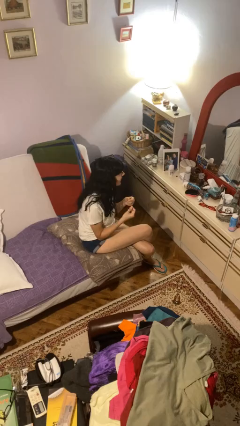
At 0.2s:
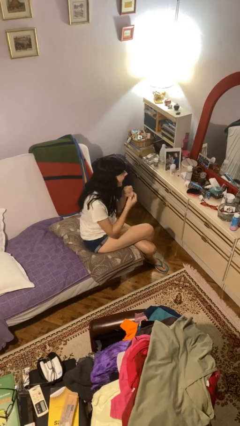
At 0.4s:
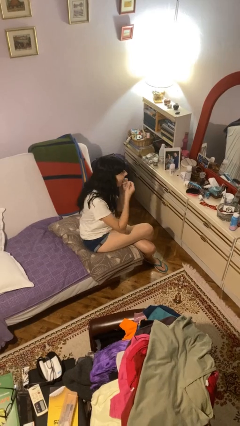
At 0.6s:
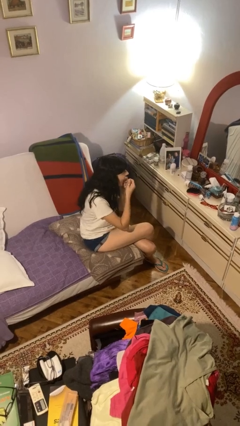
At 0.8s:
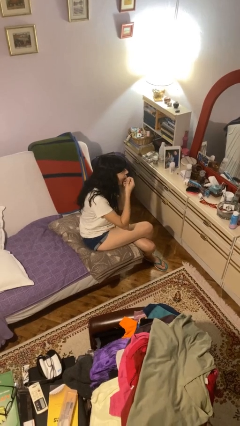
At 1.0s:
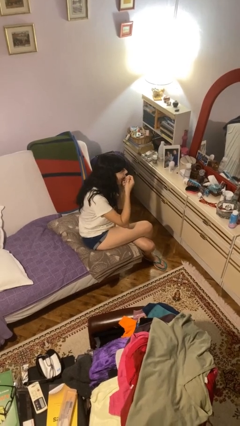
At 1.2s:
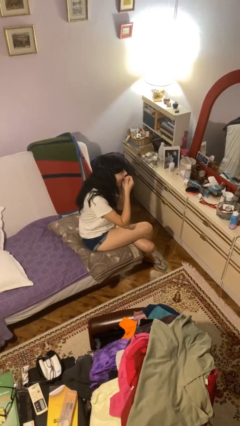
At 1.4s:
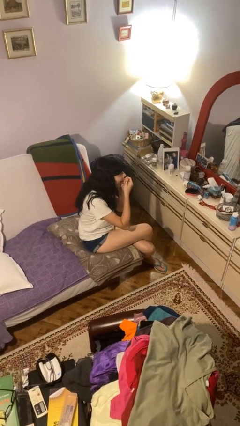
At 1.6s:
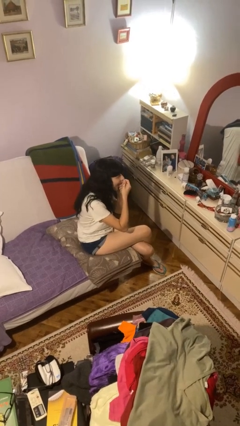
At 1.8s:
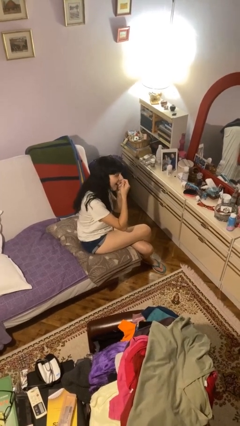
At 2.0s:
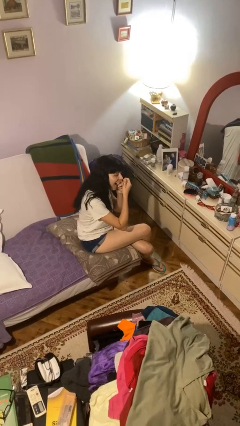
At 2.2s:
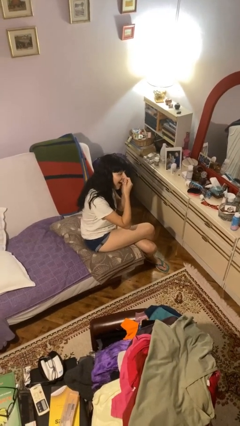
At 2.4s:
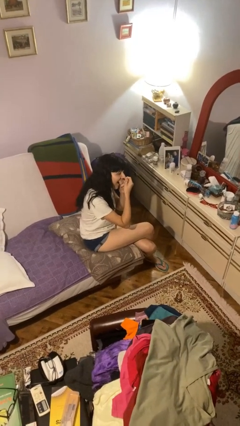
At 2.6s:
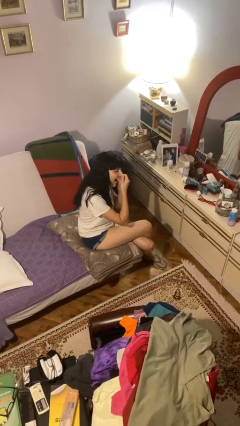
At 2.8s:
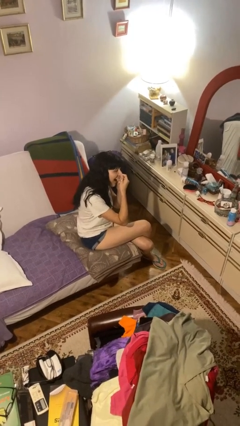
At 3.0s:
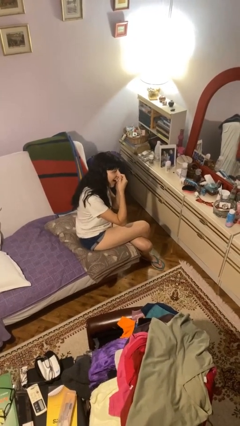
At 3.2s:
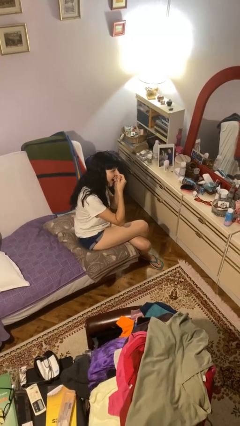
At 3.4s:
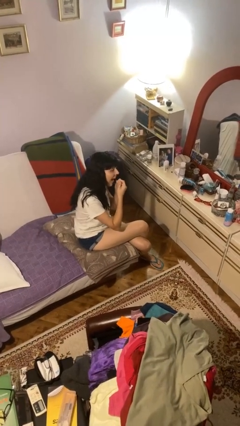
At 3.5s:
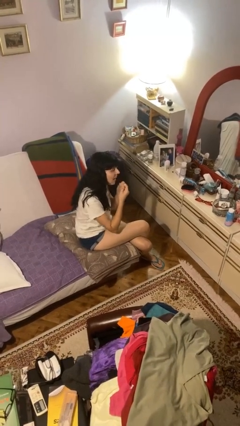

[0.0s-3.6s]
person flosses

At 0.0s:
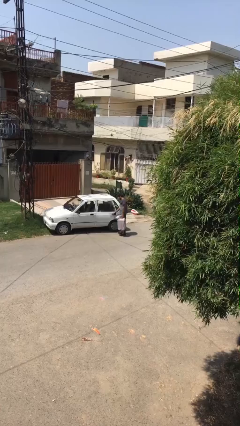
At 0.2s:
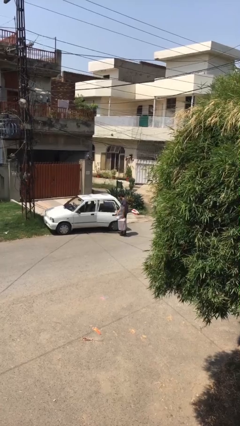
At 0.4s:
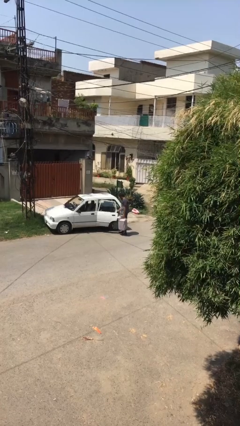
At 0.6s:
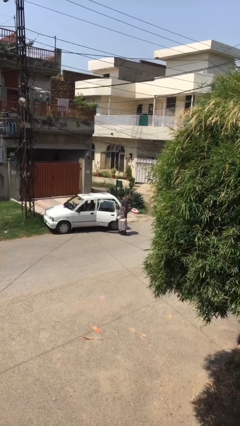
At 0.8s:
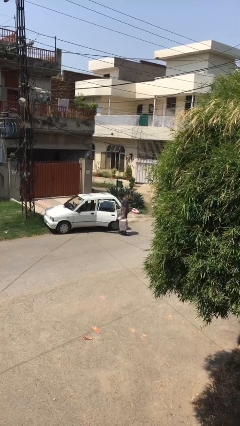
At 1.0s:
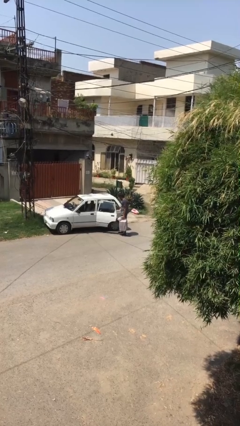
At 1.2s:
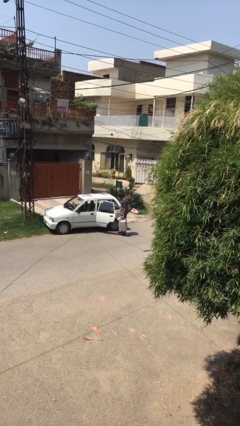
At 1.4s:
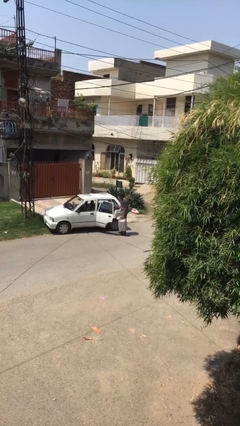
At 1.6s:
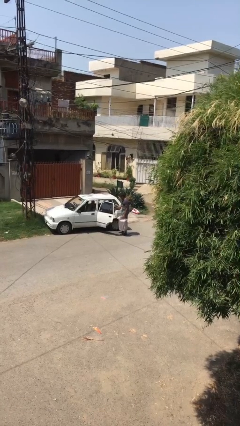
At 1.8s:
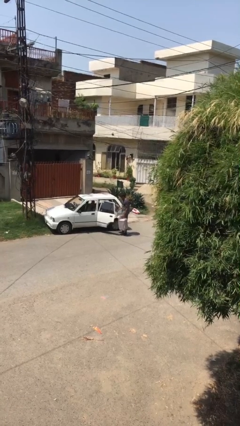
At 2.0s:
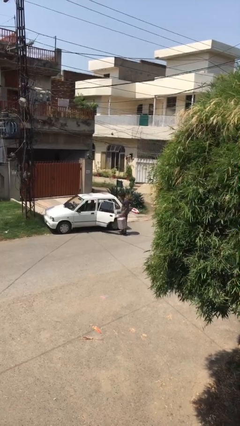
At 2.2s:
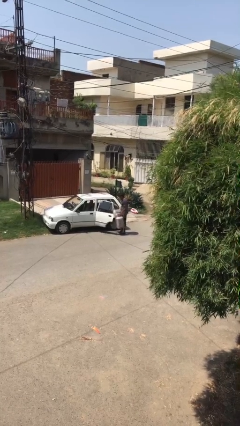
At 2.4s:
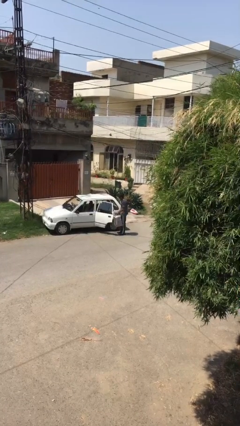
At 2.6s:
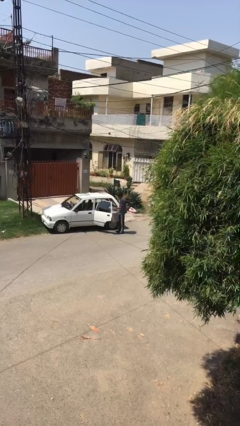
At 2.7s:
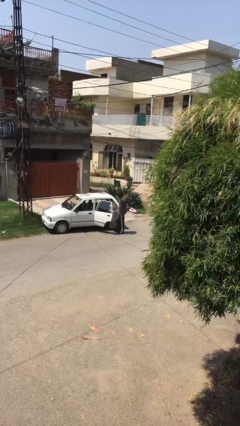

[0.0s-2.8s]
person opens car door

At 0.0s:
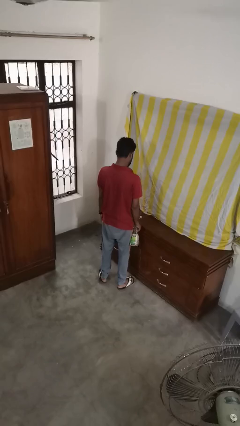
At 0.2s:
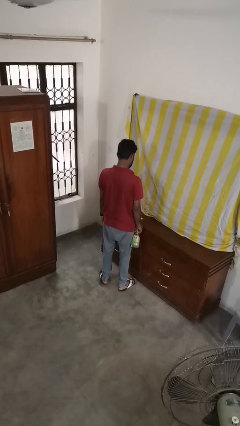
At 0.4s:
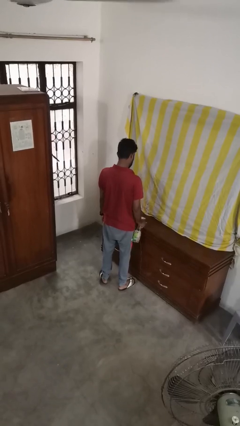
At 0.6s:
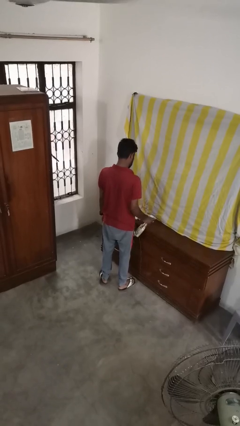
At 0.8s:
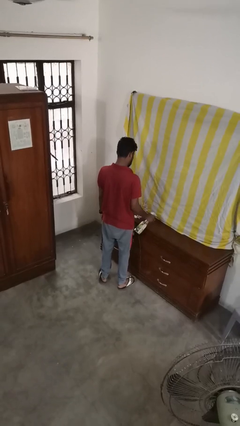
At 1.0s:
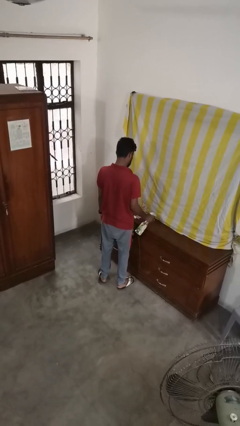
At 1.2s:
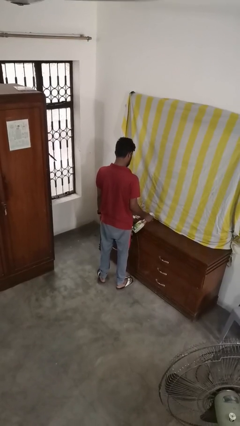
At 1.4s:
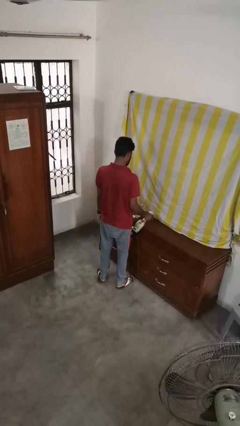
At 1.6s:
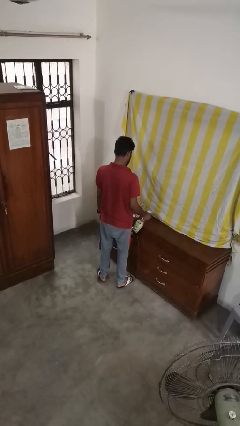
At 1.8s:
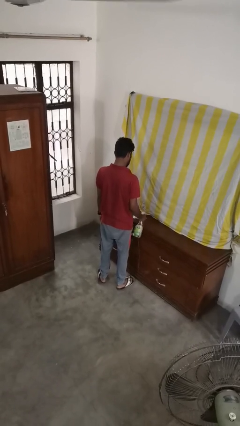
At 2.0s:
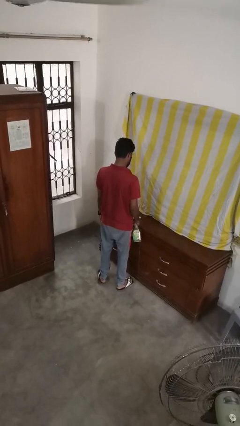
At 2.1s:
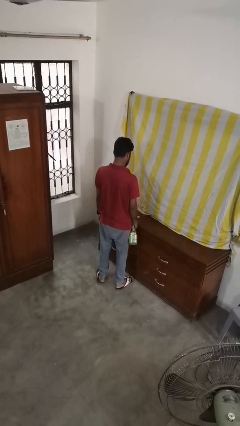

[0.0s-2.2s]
person sprays from bottle

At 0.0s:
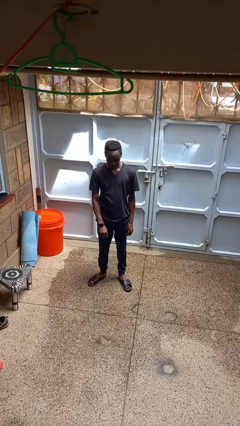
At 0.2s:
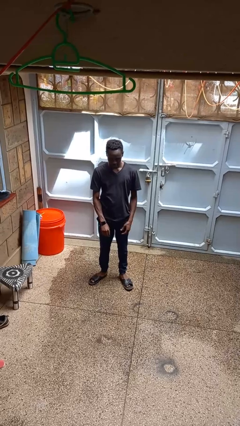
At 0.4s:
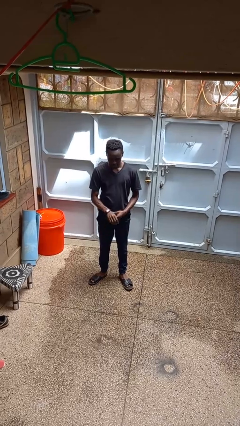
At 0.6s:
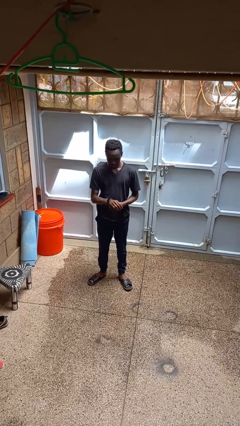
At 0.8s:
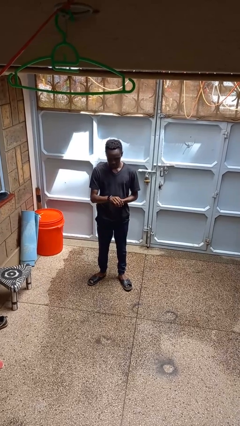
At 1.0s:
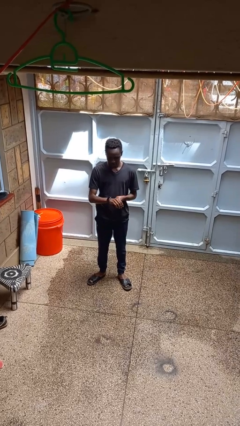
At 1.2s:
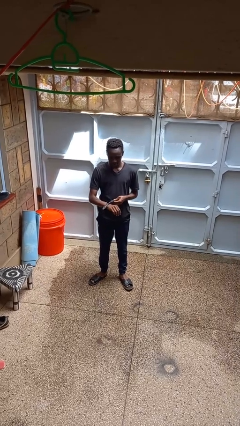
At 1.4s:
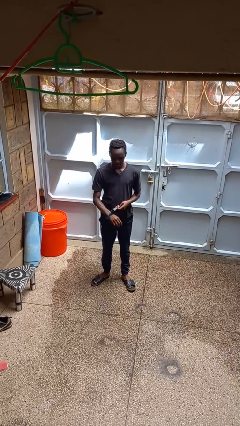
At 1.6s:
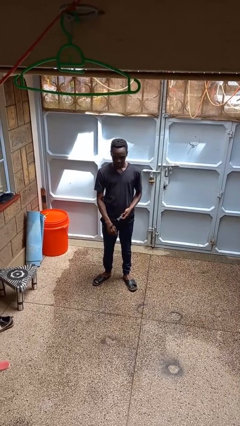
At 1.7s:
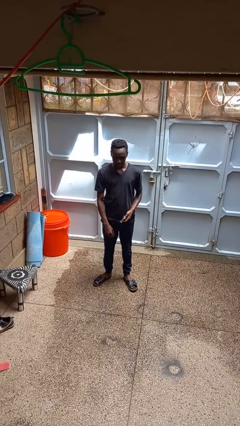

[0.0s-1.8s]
person takes off wristwatch

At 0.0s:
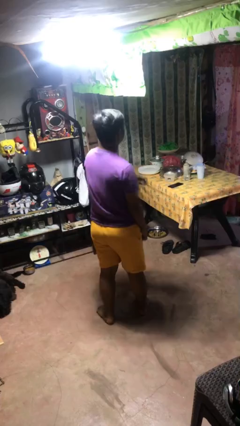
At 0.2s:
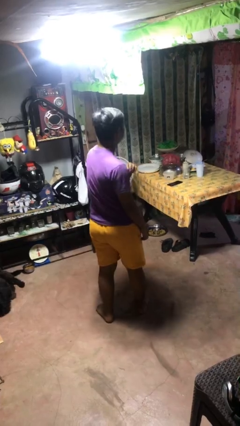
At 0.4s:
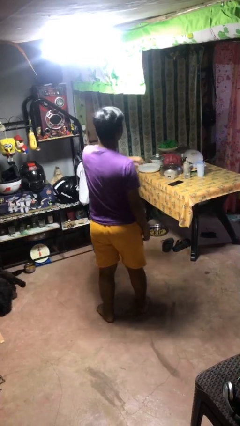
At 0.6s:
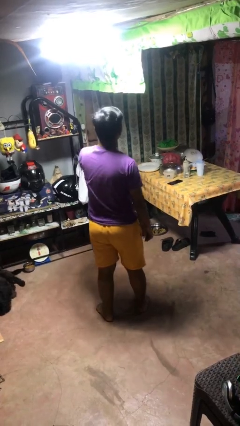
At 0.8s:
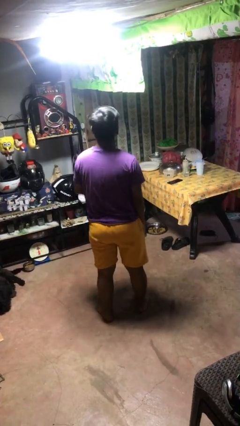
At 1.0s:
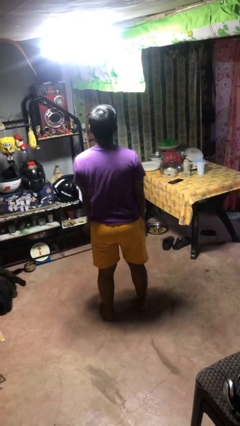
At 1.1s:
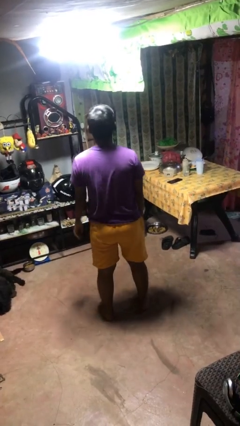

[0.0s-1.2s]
person karate chop

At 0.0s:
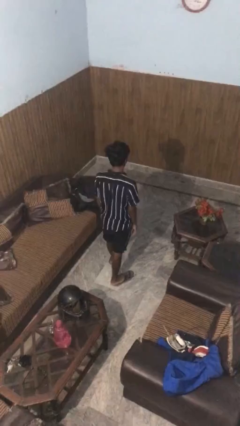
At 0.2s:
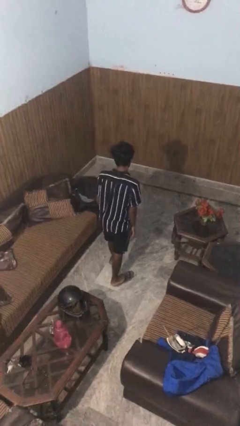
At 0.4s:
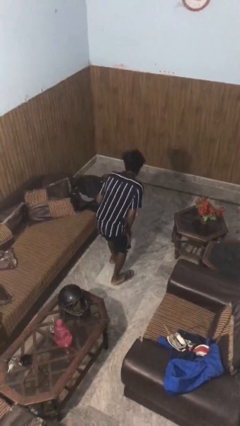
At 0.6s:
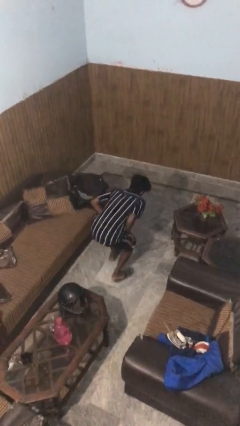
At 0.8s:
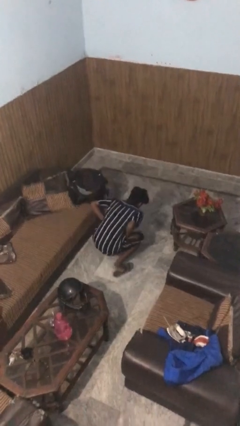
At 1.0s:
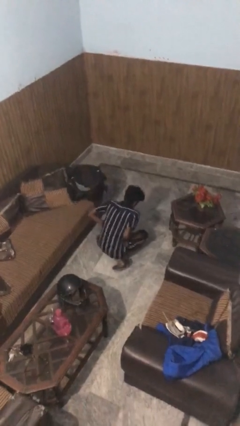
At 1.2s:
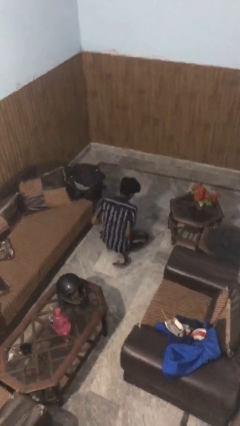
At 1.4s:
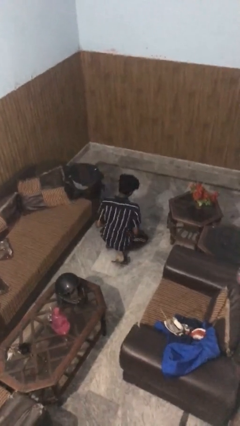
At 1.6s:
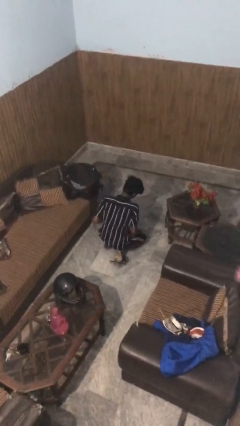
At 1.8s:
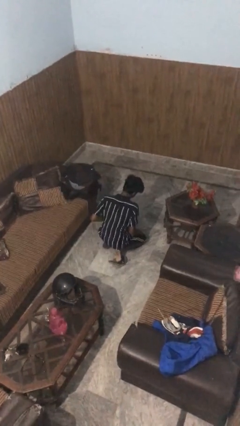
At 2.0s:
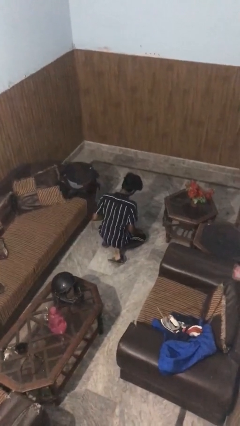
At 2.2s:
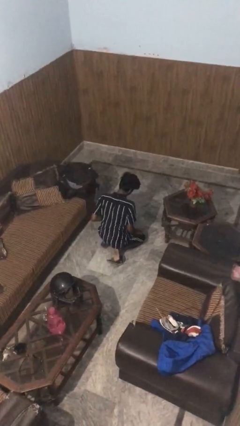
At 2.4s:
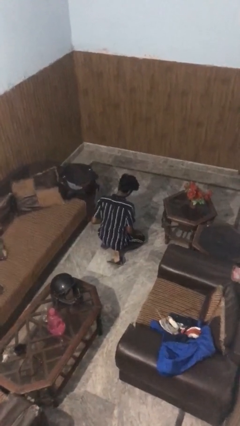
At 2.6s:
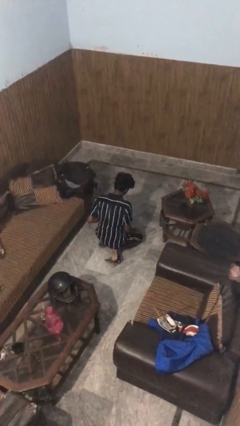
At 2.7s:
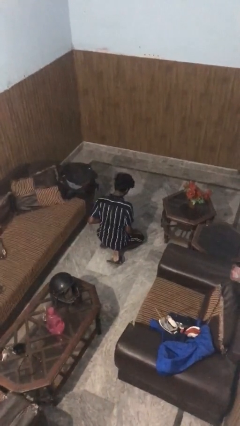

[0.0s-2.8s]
person kneels

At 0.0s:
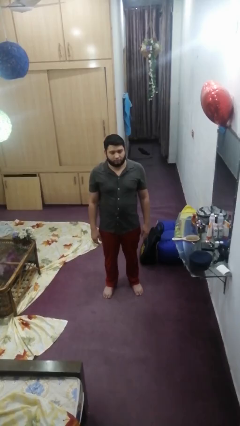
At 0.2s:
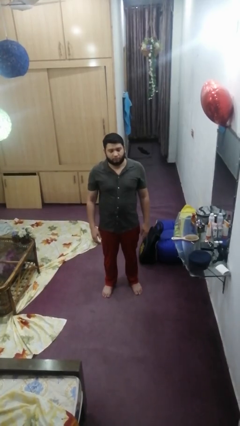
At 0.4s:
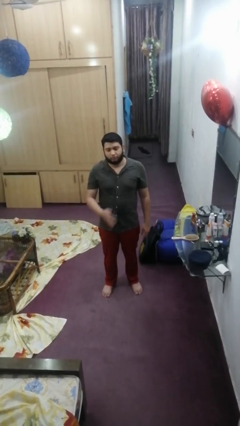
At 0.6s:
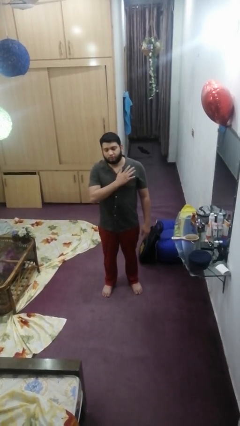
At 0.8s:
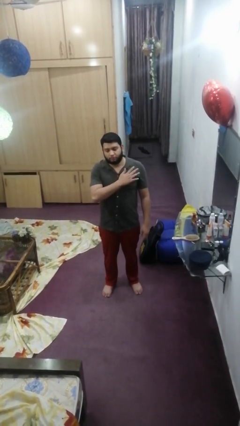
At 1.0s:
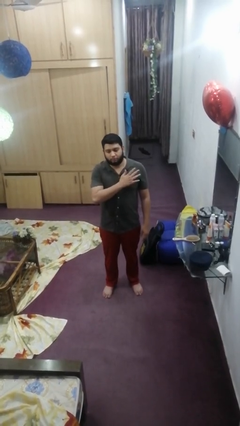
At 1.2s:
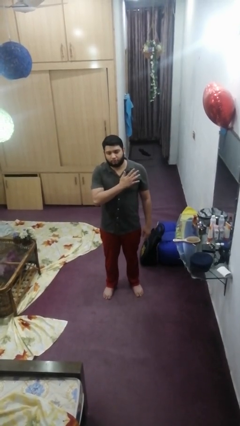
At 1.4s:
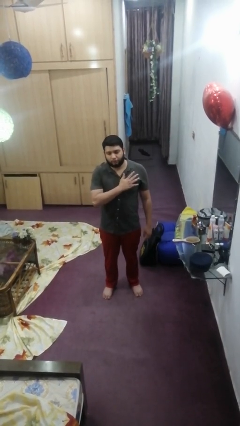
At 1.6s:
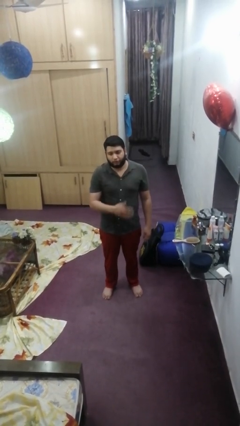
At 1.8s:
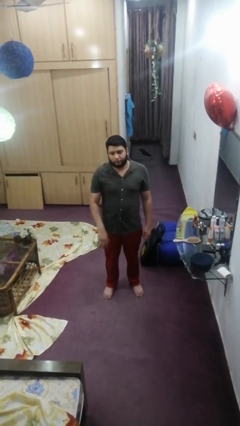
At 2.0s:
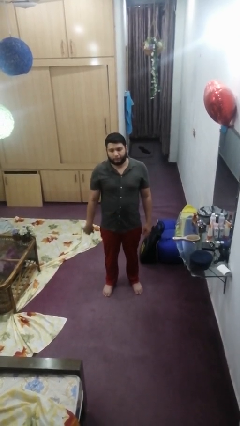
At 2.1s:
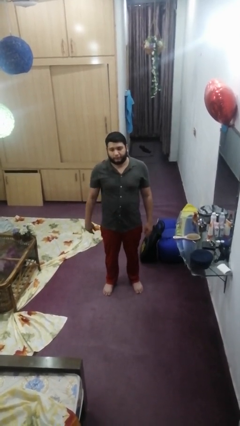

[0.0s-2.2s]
person drums on chest

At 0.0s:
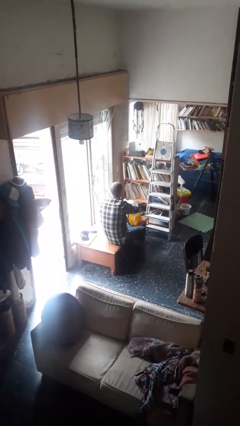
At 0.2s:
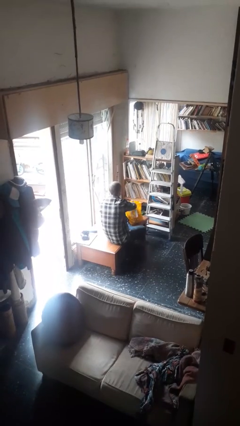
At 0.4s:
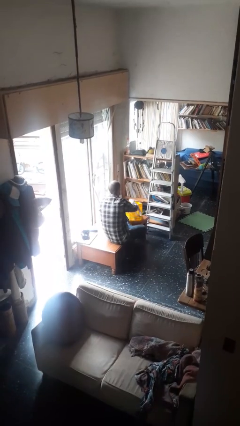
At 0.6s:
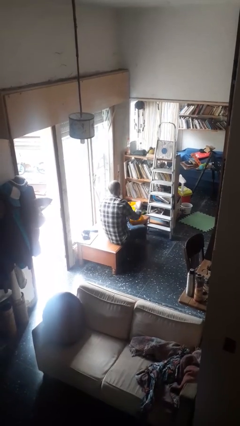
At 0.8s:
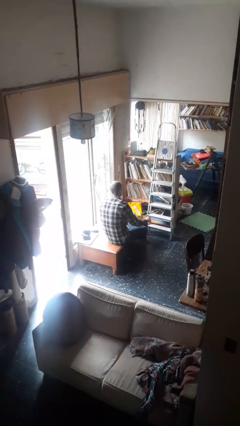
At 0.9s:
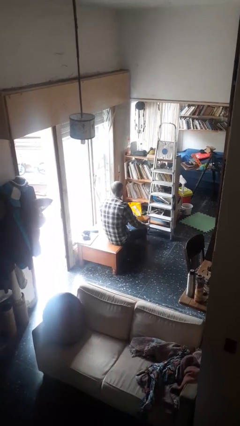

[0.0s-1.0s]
person puts object into bag
